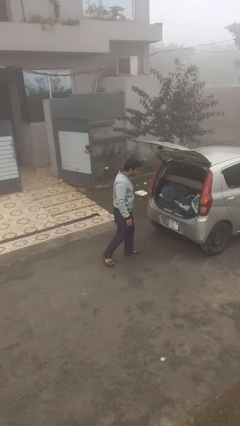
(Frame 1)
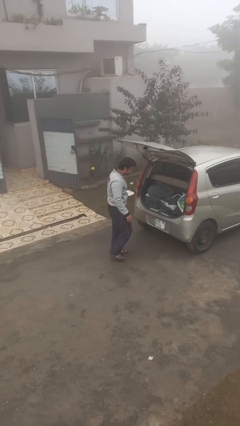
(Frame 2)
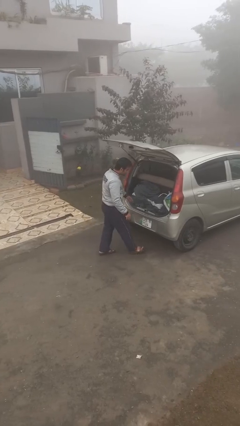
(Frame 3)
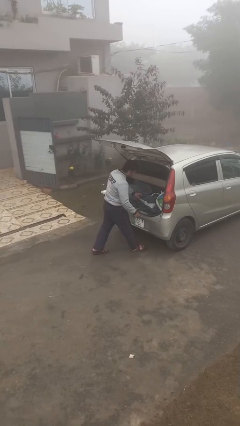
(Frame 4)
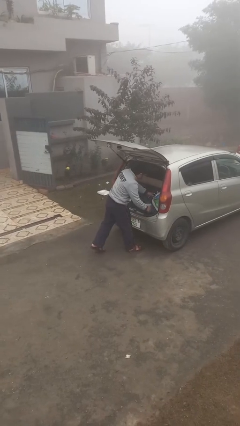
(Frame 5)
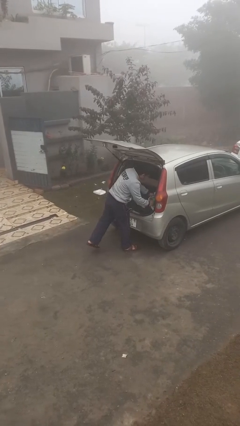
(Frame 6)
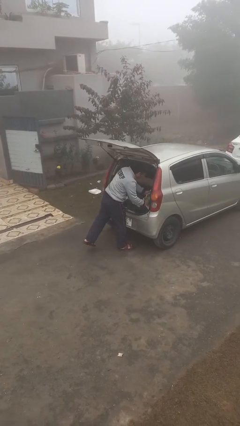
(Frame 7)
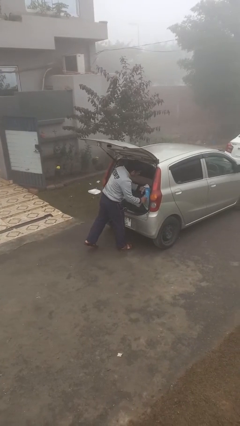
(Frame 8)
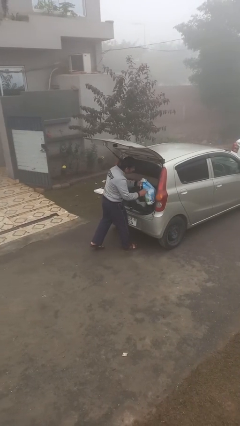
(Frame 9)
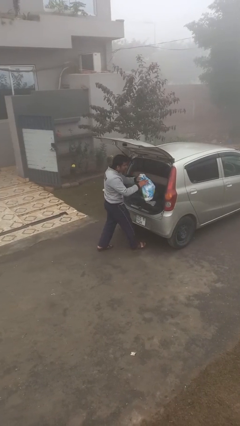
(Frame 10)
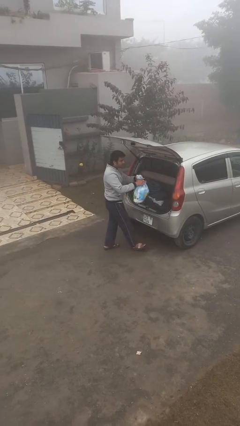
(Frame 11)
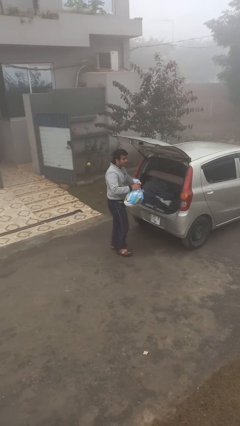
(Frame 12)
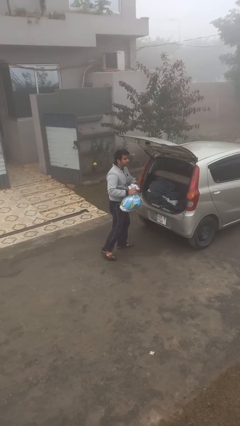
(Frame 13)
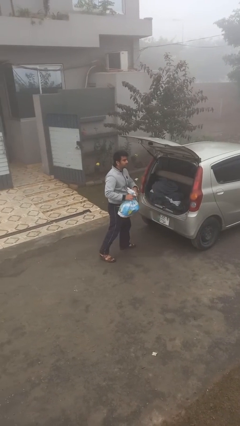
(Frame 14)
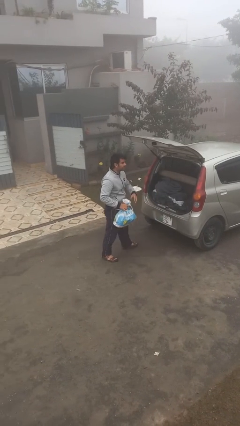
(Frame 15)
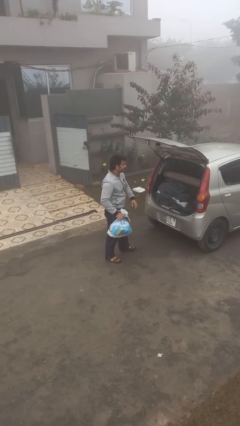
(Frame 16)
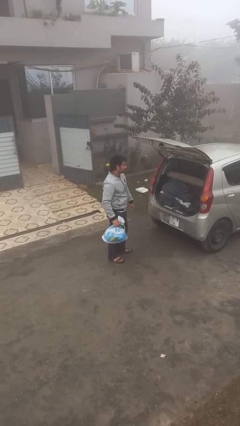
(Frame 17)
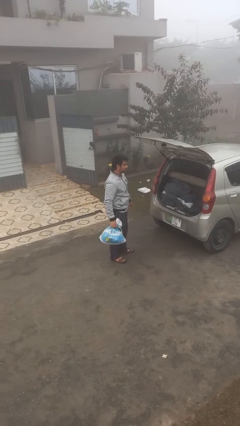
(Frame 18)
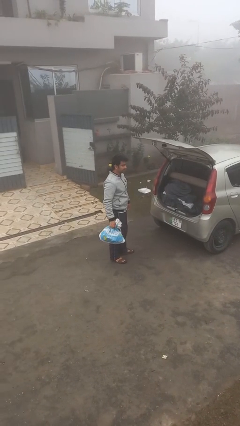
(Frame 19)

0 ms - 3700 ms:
person unloads car

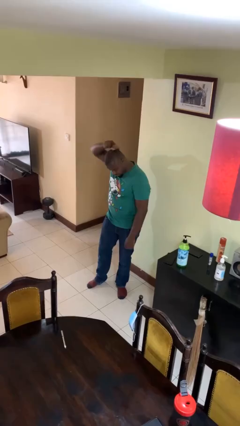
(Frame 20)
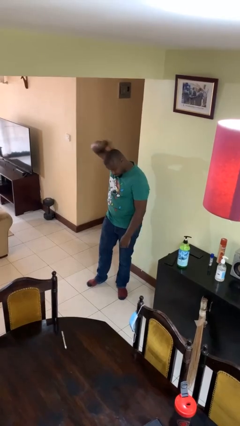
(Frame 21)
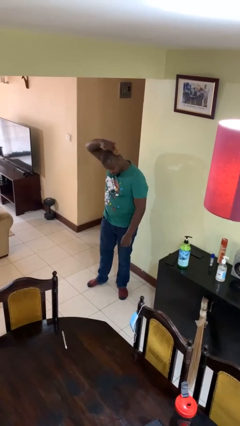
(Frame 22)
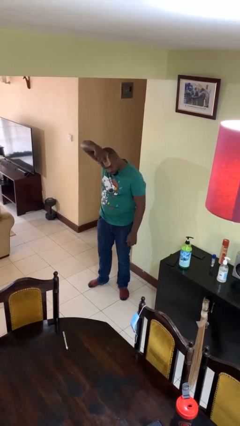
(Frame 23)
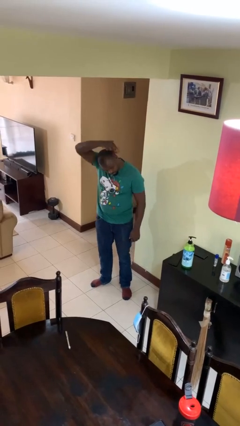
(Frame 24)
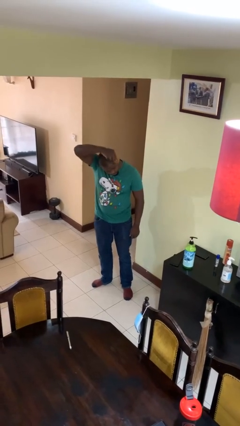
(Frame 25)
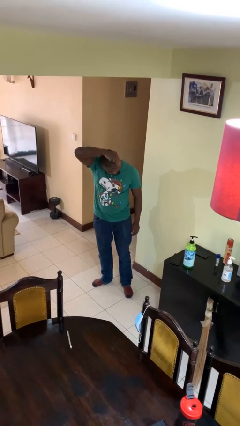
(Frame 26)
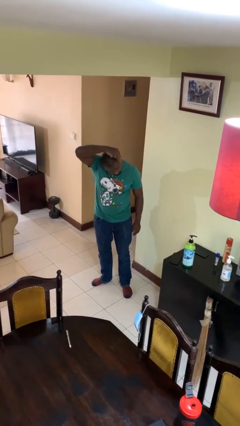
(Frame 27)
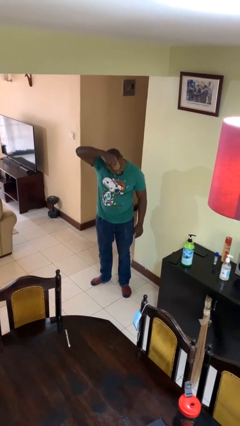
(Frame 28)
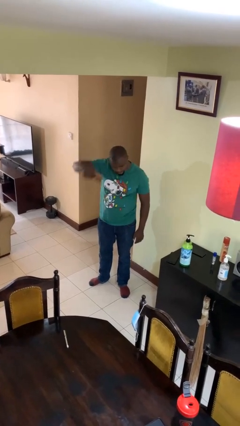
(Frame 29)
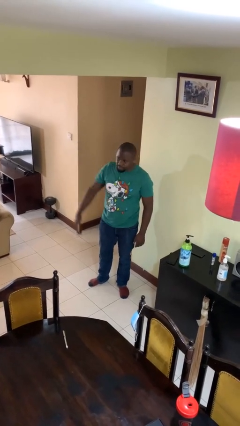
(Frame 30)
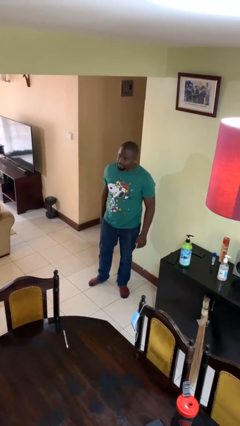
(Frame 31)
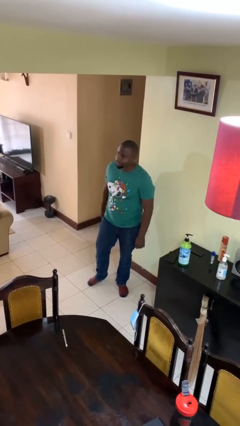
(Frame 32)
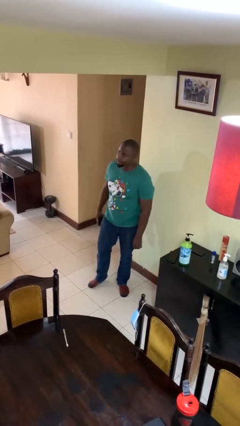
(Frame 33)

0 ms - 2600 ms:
person brushes hair

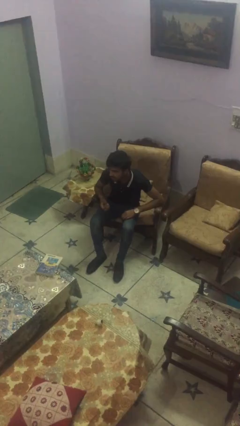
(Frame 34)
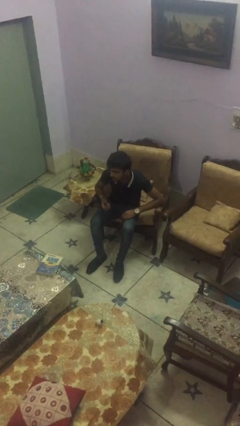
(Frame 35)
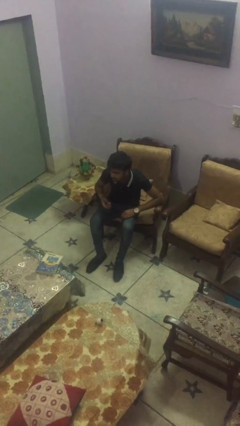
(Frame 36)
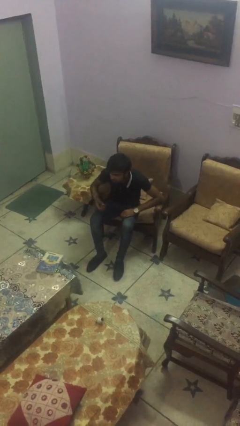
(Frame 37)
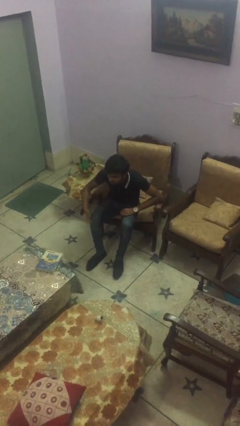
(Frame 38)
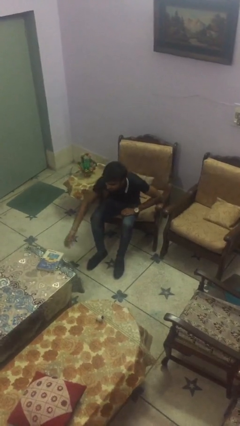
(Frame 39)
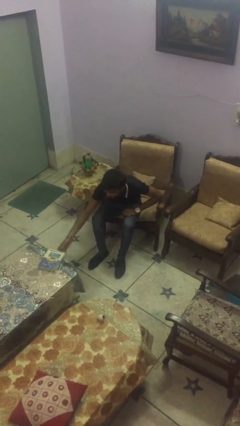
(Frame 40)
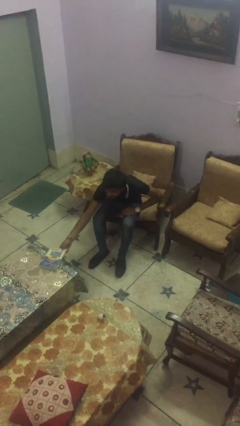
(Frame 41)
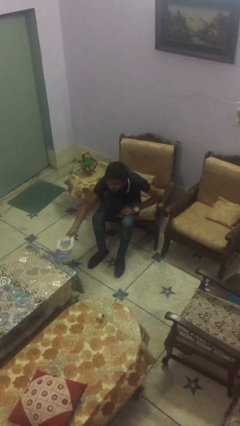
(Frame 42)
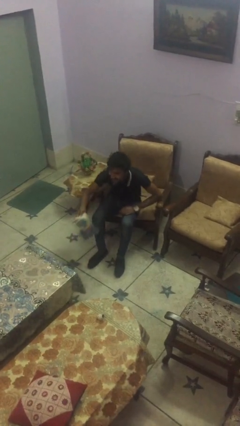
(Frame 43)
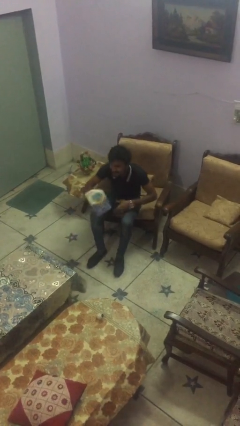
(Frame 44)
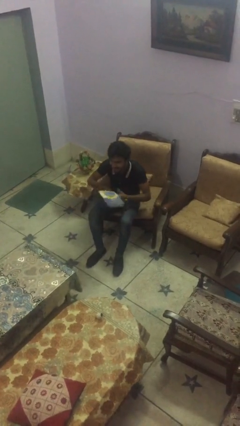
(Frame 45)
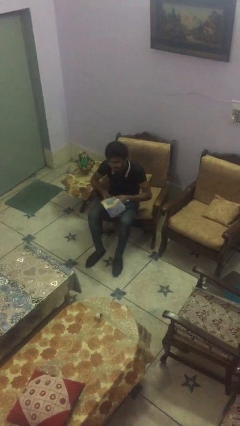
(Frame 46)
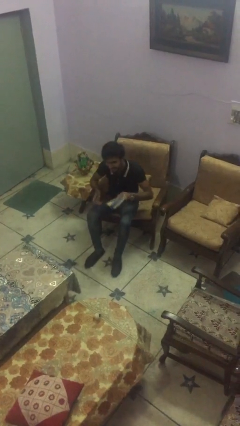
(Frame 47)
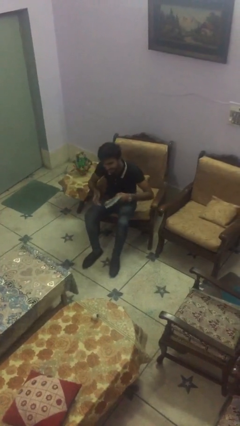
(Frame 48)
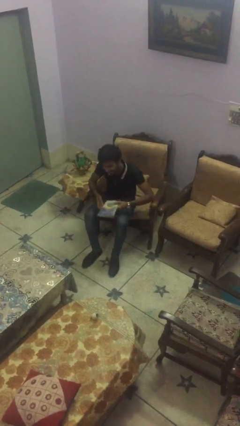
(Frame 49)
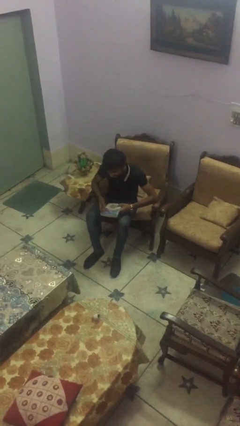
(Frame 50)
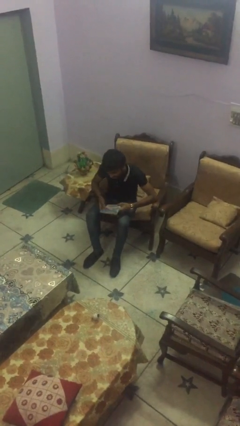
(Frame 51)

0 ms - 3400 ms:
person picks up object from table

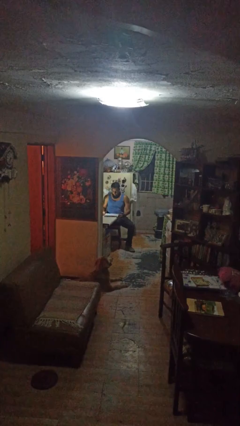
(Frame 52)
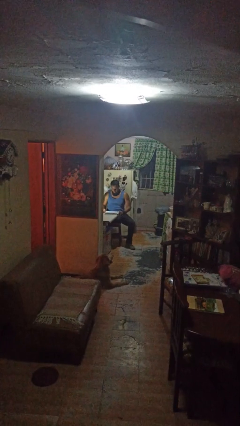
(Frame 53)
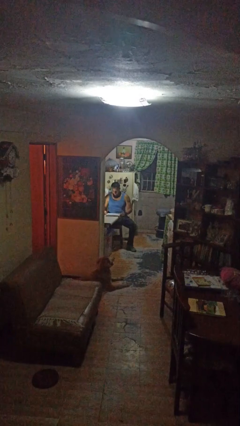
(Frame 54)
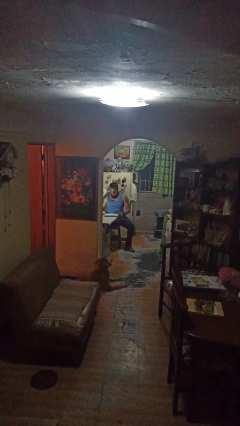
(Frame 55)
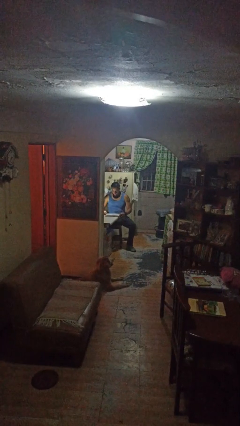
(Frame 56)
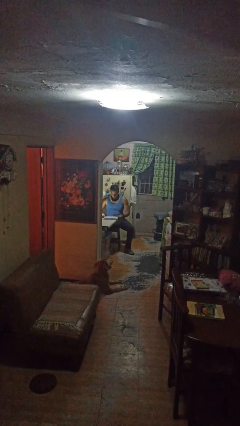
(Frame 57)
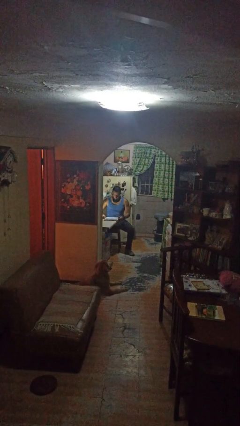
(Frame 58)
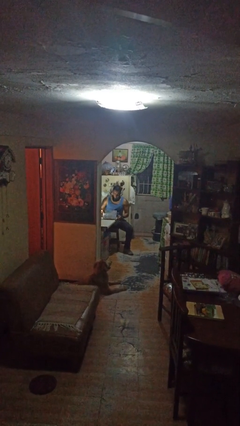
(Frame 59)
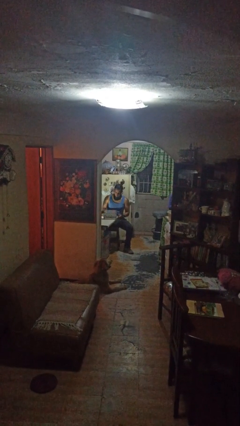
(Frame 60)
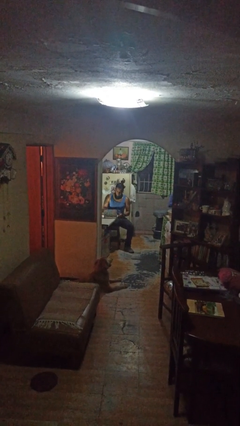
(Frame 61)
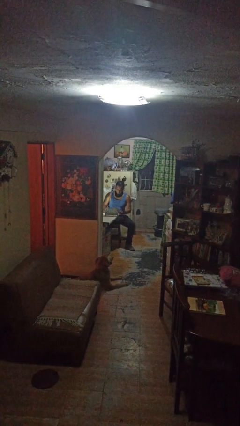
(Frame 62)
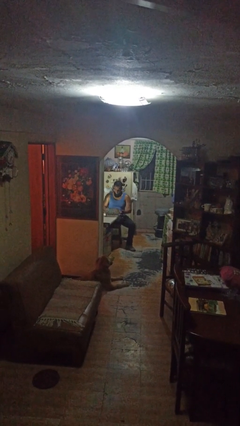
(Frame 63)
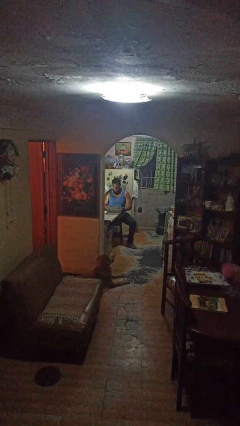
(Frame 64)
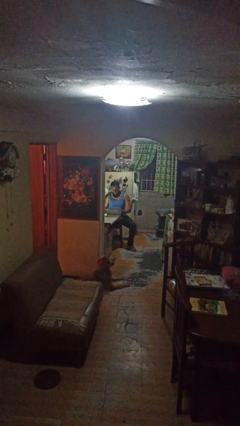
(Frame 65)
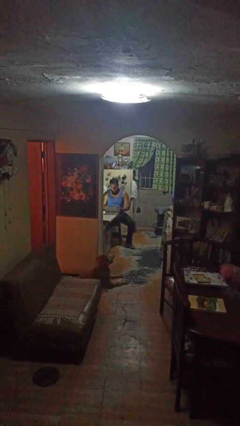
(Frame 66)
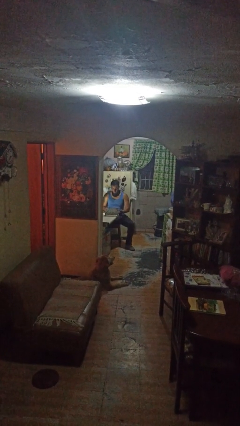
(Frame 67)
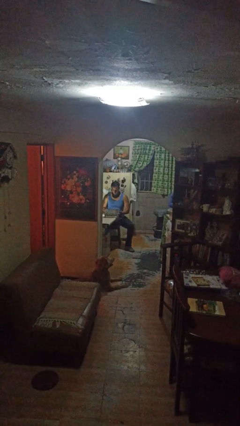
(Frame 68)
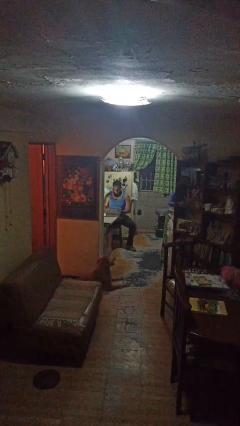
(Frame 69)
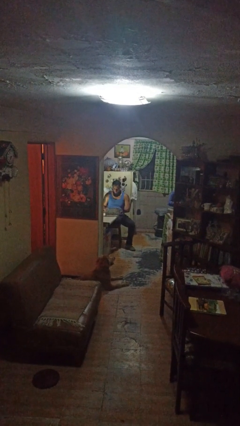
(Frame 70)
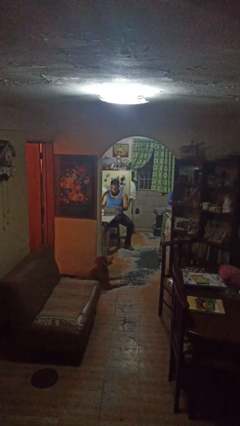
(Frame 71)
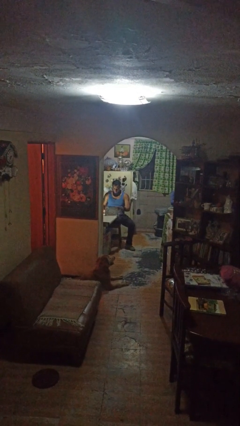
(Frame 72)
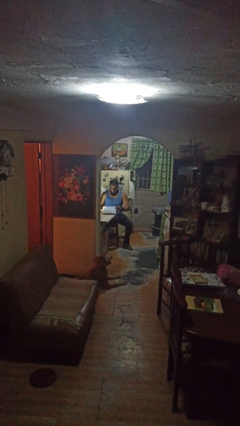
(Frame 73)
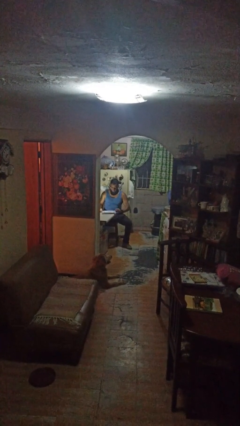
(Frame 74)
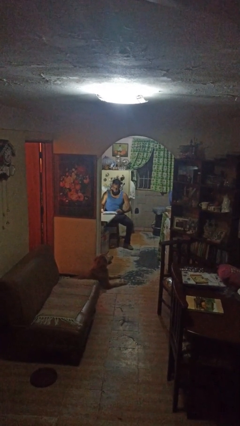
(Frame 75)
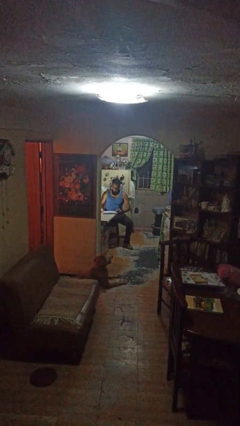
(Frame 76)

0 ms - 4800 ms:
person interacts with laptop

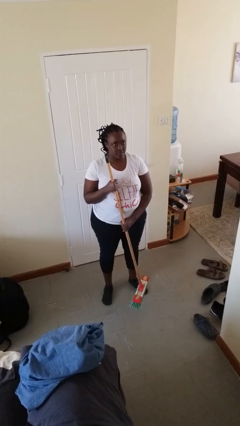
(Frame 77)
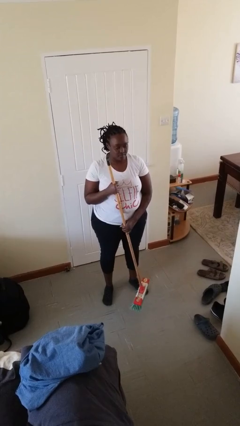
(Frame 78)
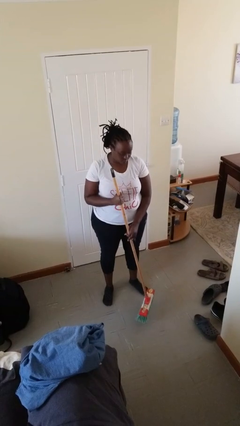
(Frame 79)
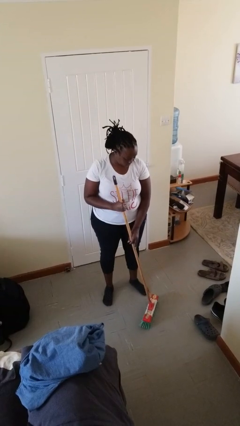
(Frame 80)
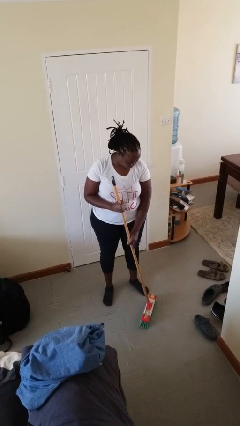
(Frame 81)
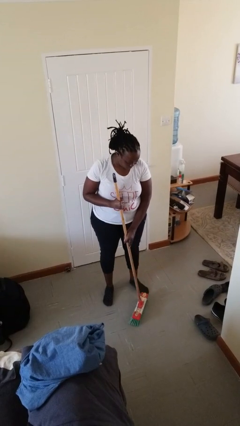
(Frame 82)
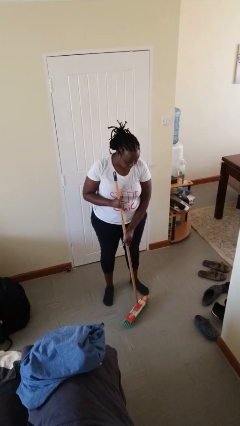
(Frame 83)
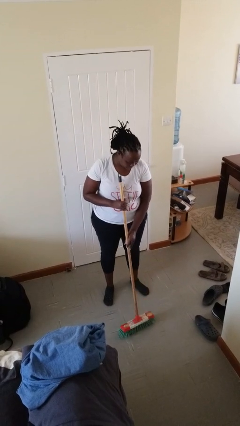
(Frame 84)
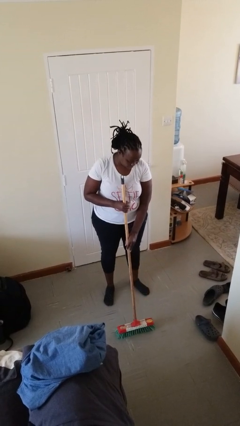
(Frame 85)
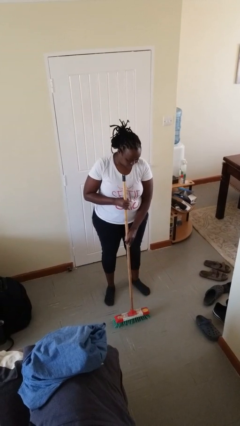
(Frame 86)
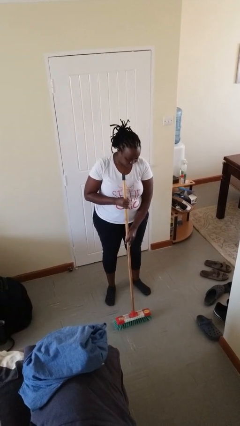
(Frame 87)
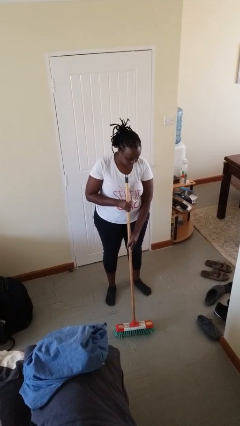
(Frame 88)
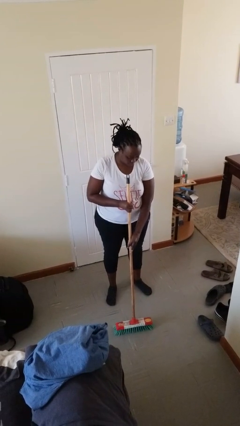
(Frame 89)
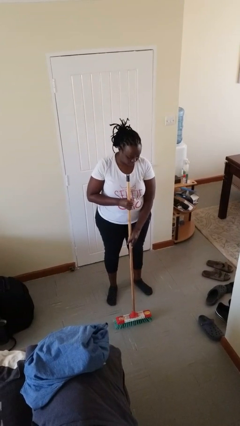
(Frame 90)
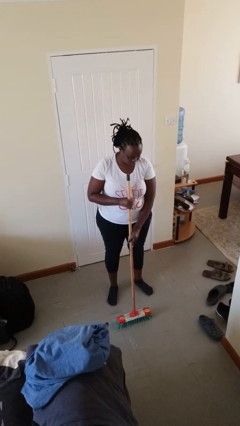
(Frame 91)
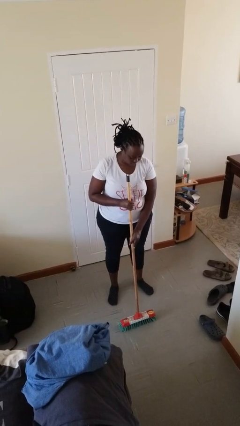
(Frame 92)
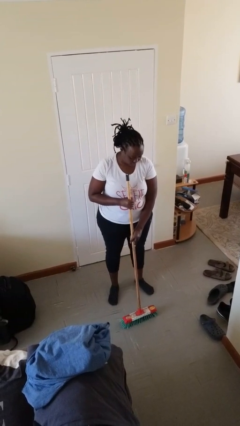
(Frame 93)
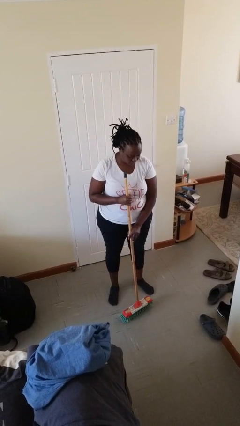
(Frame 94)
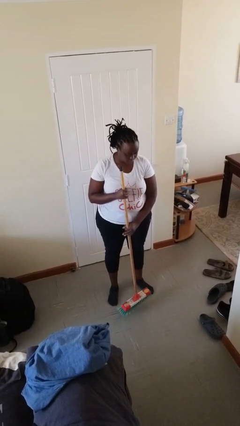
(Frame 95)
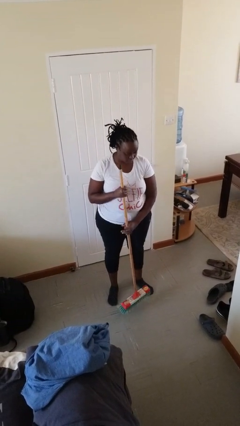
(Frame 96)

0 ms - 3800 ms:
person sweeps floor
